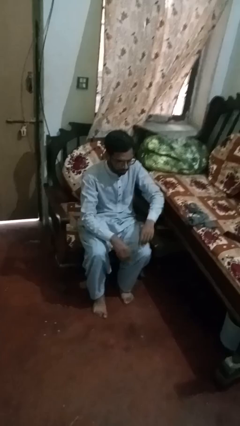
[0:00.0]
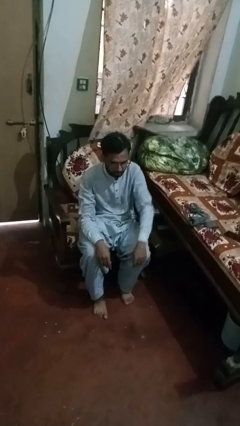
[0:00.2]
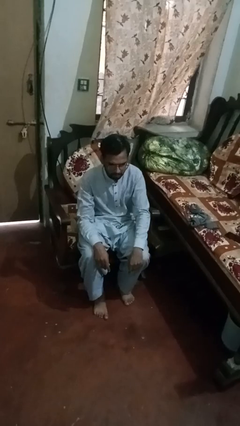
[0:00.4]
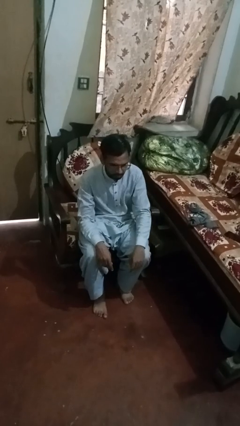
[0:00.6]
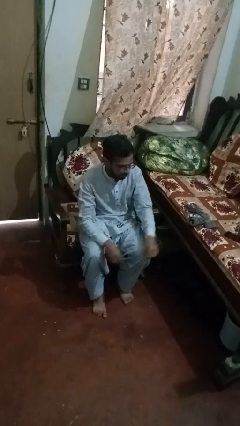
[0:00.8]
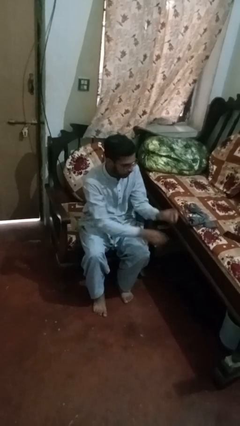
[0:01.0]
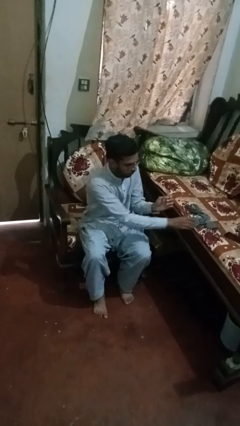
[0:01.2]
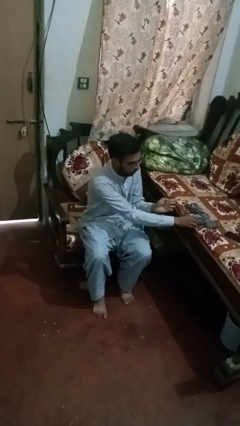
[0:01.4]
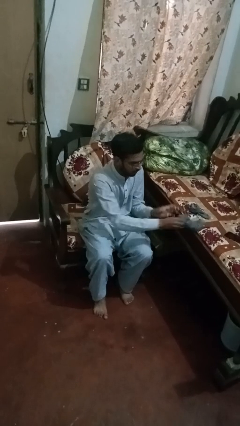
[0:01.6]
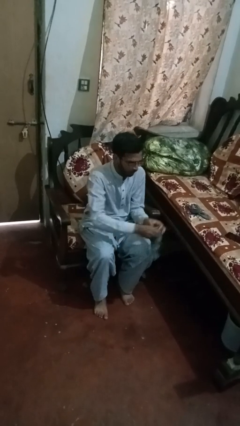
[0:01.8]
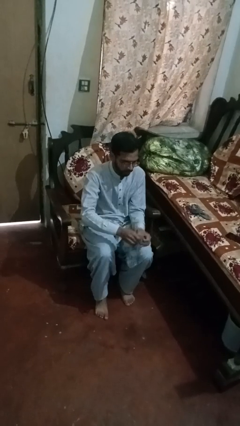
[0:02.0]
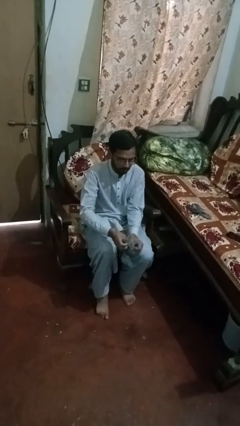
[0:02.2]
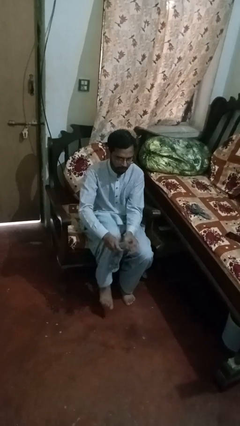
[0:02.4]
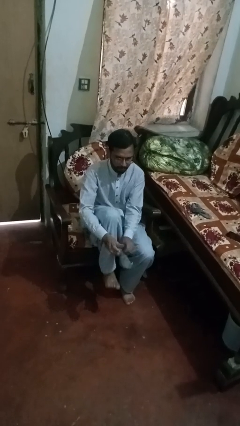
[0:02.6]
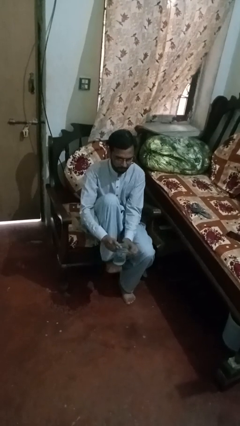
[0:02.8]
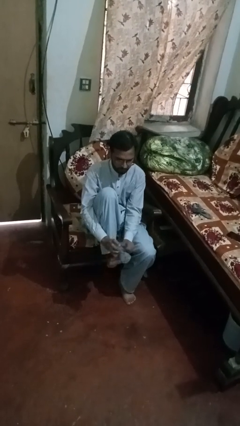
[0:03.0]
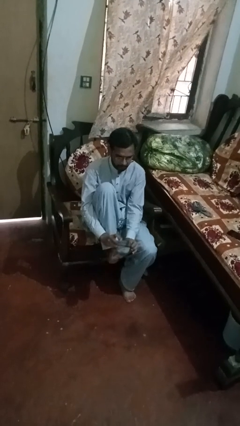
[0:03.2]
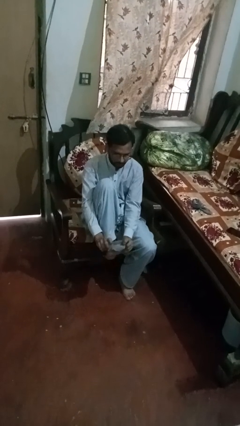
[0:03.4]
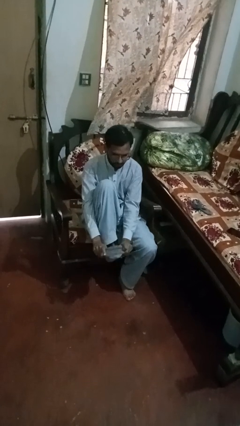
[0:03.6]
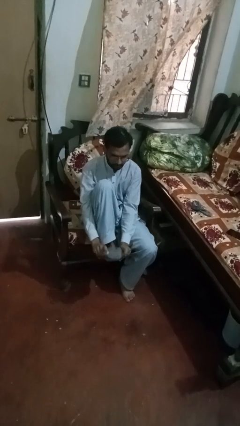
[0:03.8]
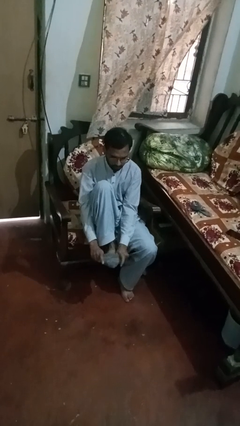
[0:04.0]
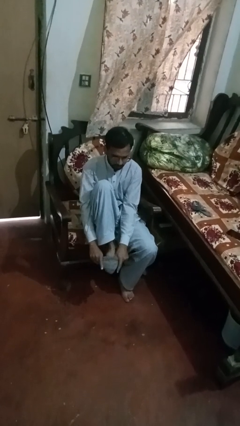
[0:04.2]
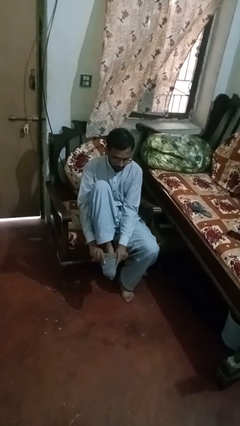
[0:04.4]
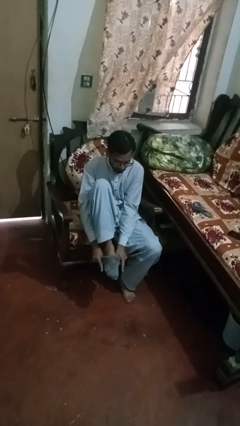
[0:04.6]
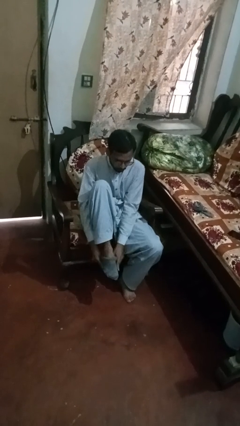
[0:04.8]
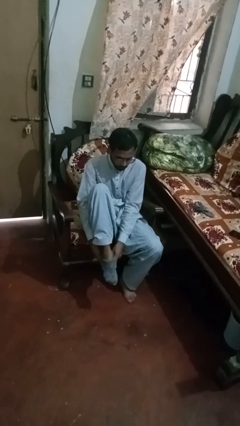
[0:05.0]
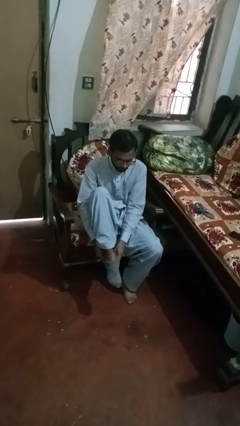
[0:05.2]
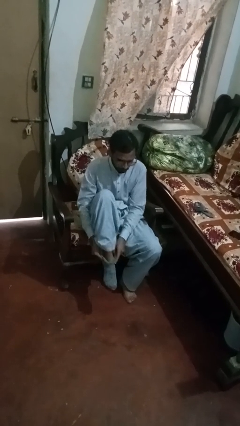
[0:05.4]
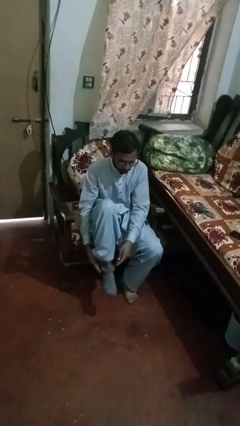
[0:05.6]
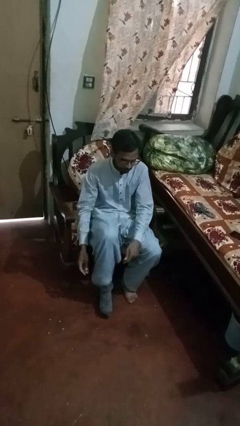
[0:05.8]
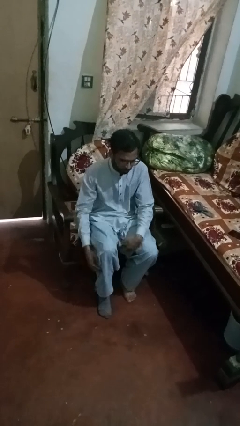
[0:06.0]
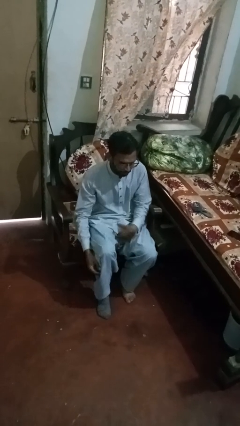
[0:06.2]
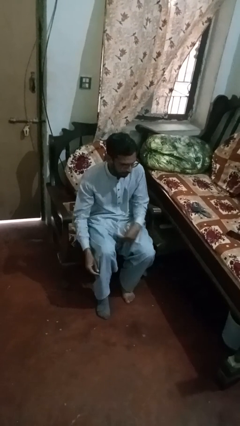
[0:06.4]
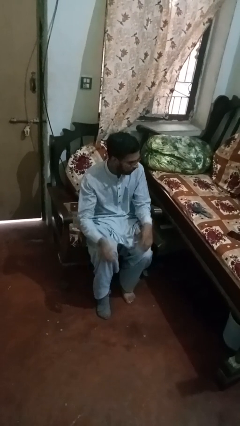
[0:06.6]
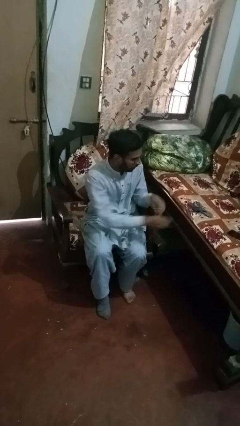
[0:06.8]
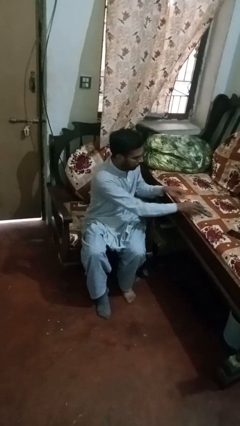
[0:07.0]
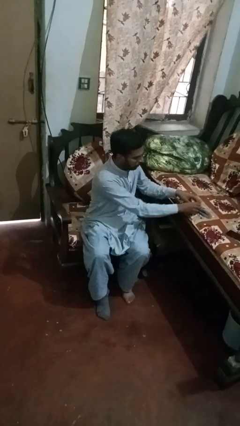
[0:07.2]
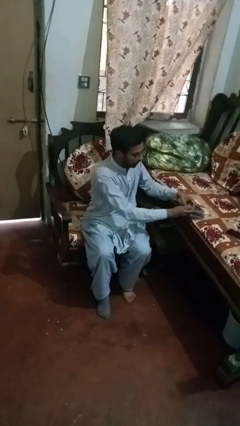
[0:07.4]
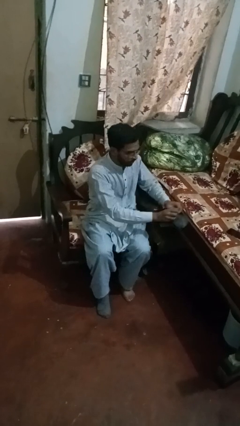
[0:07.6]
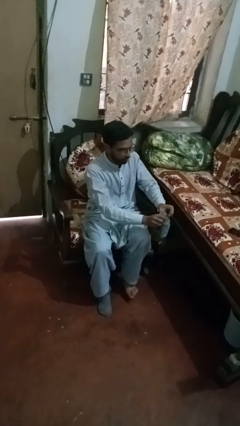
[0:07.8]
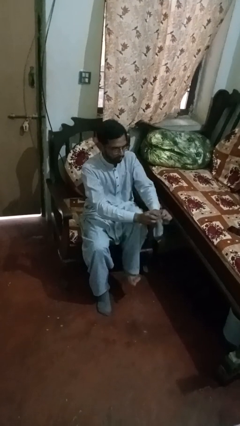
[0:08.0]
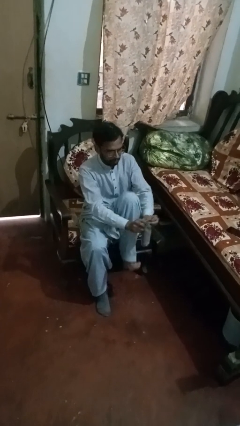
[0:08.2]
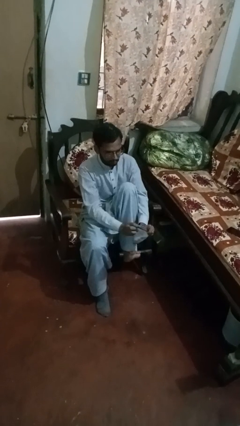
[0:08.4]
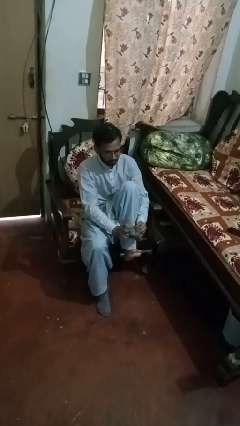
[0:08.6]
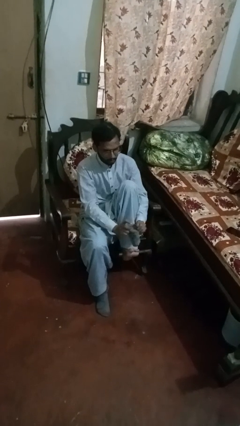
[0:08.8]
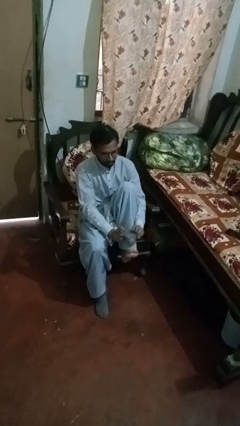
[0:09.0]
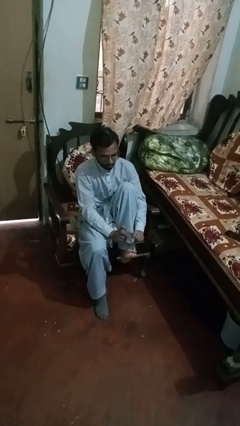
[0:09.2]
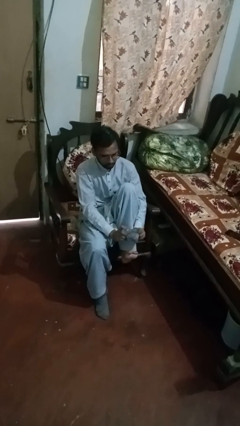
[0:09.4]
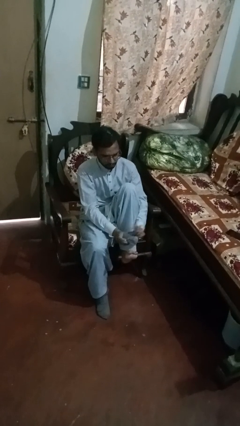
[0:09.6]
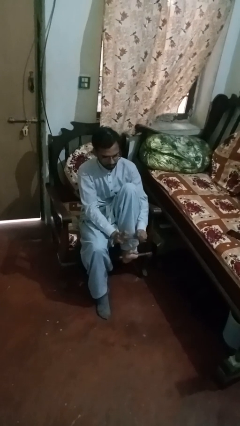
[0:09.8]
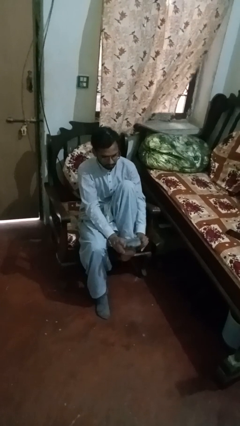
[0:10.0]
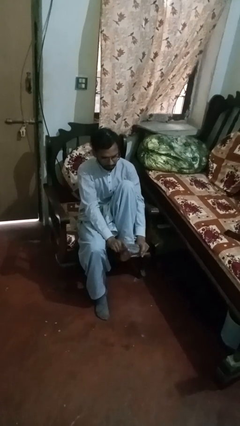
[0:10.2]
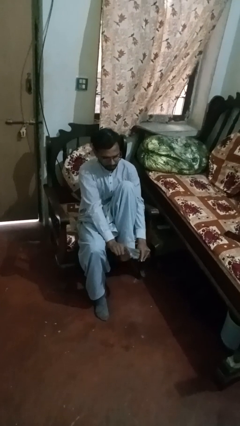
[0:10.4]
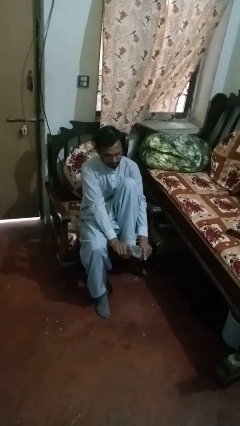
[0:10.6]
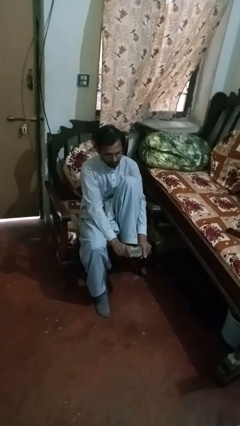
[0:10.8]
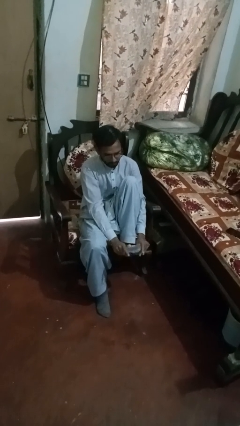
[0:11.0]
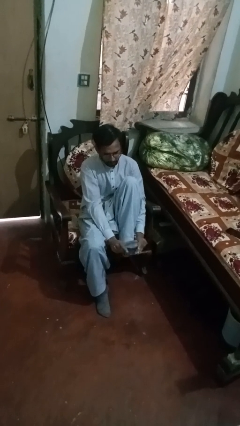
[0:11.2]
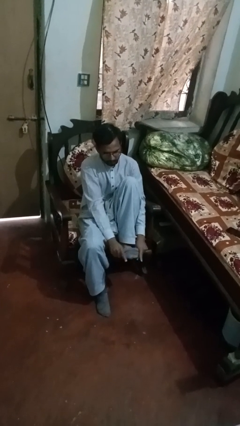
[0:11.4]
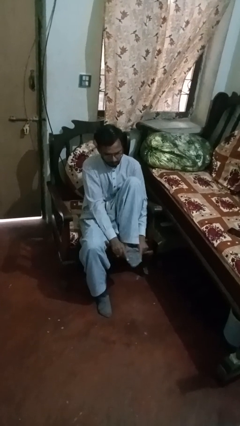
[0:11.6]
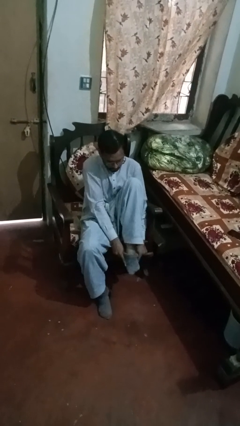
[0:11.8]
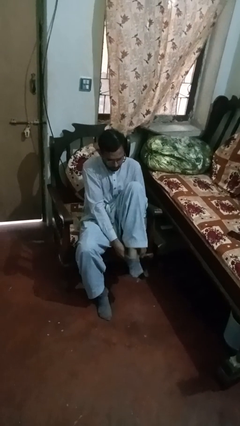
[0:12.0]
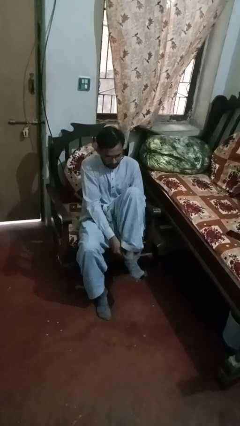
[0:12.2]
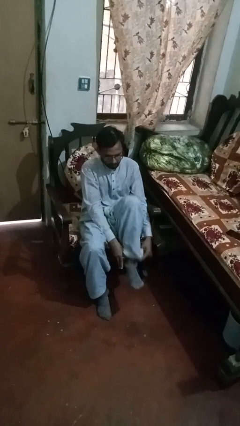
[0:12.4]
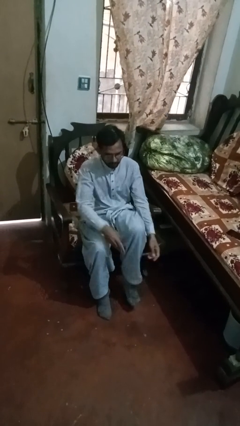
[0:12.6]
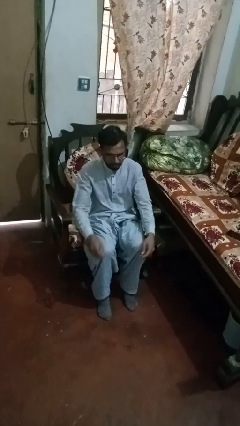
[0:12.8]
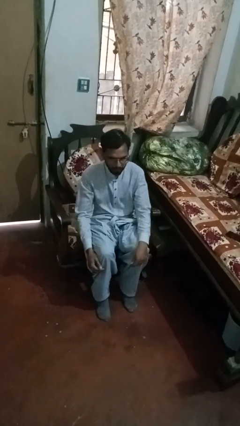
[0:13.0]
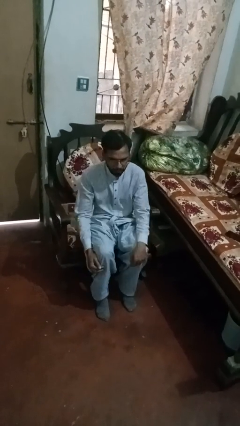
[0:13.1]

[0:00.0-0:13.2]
person puts on socks

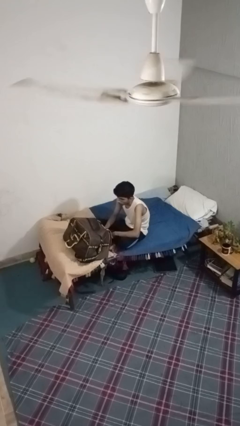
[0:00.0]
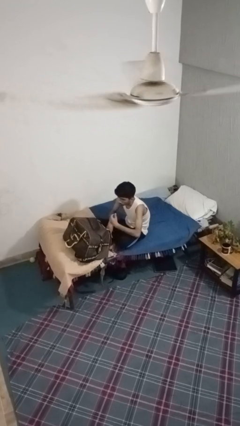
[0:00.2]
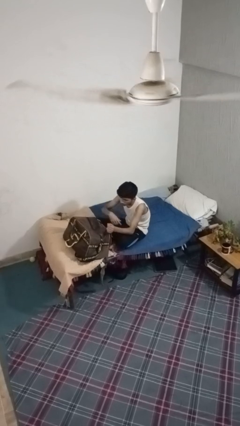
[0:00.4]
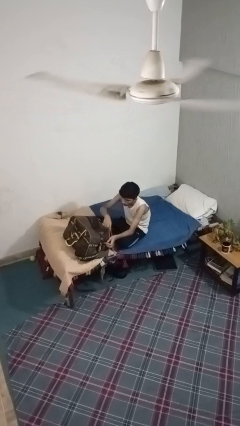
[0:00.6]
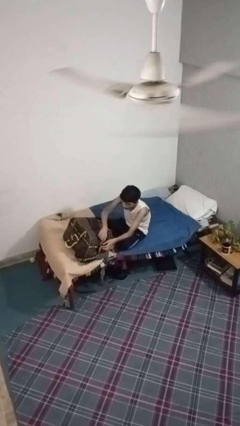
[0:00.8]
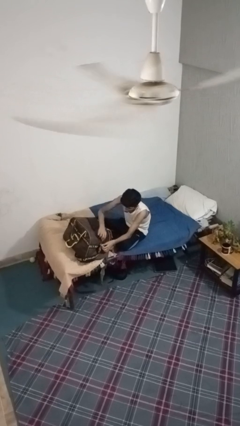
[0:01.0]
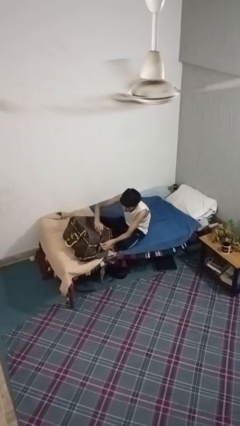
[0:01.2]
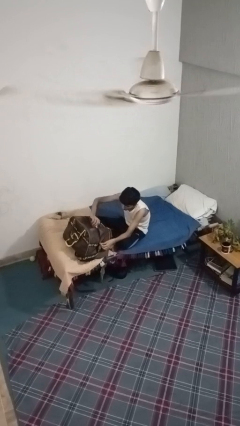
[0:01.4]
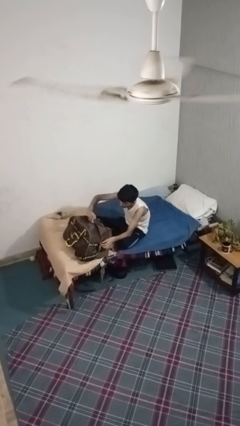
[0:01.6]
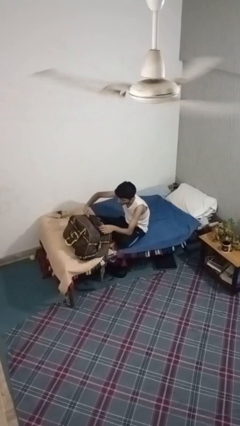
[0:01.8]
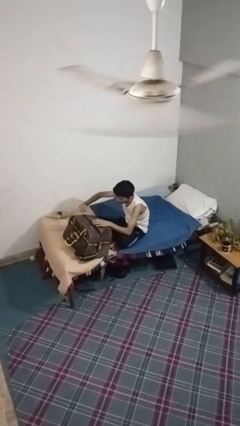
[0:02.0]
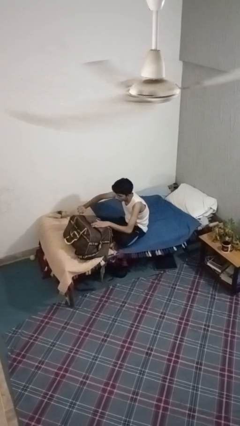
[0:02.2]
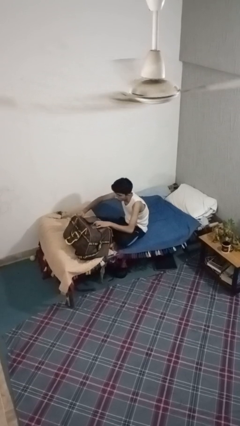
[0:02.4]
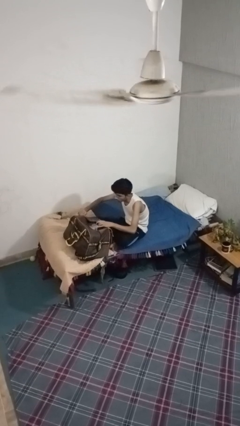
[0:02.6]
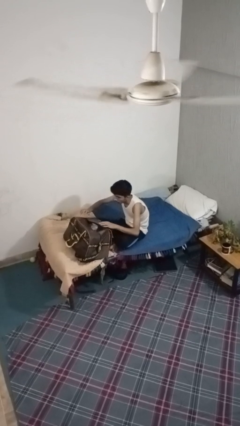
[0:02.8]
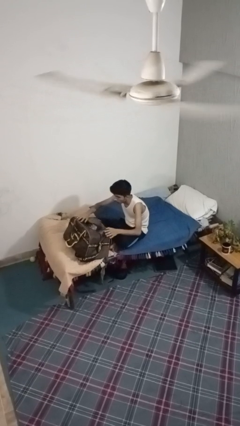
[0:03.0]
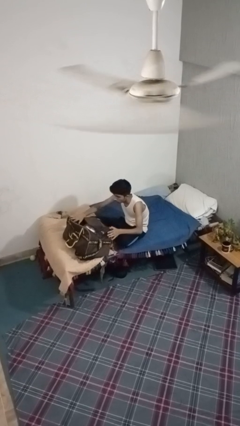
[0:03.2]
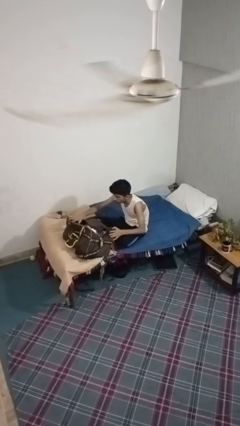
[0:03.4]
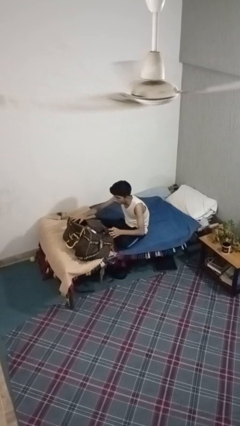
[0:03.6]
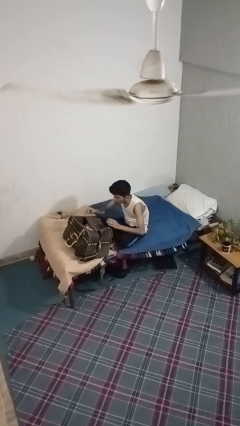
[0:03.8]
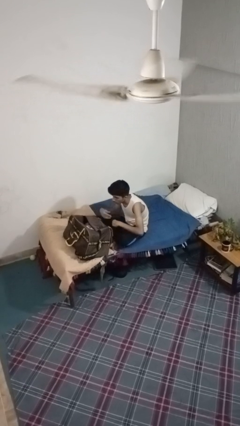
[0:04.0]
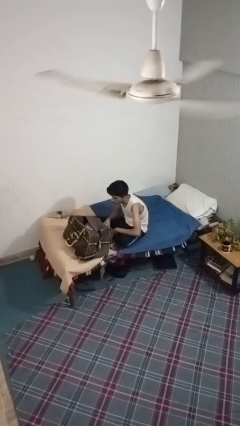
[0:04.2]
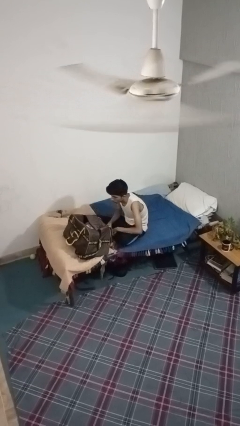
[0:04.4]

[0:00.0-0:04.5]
person opens suitcase

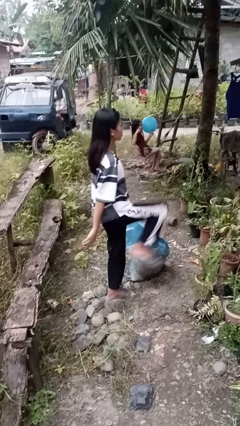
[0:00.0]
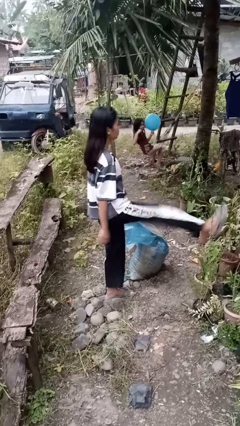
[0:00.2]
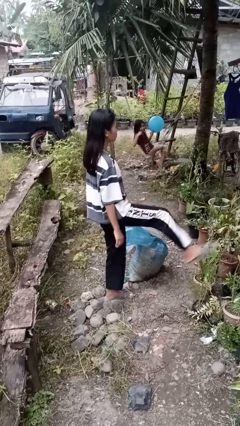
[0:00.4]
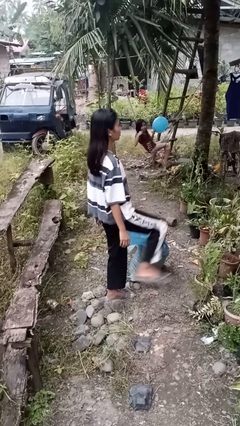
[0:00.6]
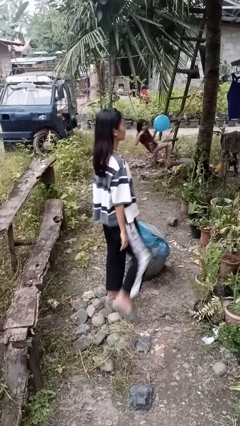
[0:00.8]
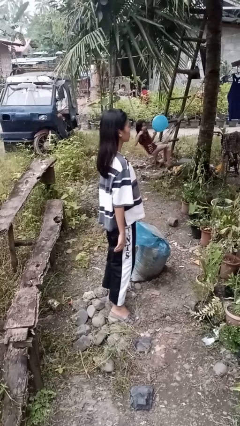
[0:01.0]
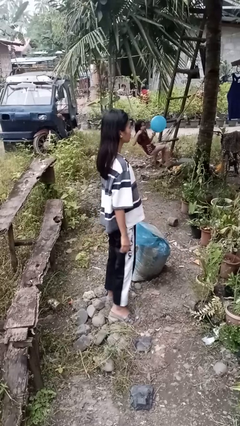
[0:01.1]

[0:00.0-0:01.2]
person karate kicks
